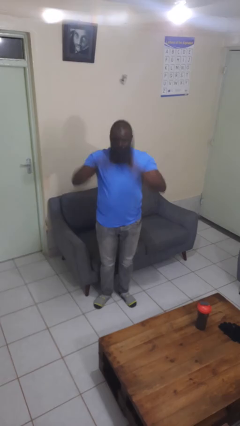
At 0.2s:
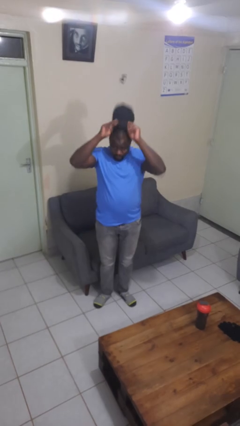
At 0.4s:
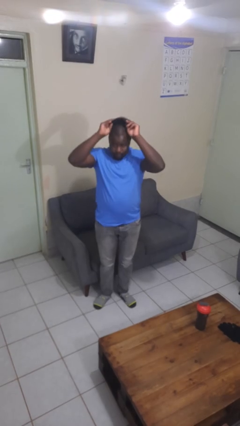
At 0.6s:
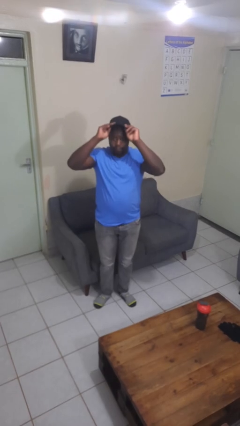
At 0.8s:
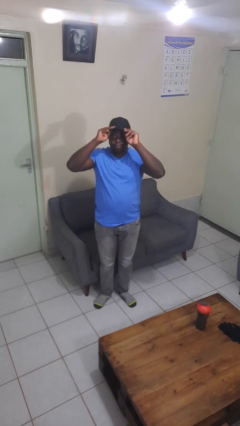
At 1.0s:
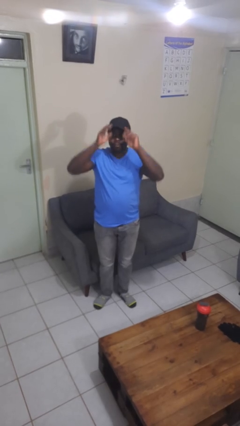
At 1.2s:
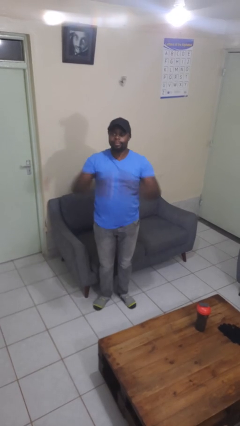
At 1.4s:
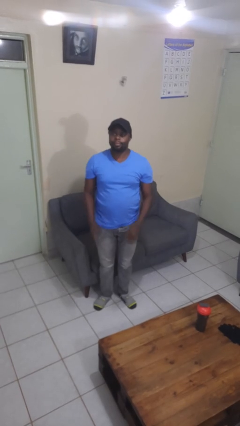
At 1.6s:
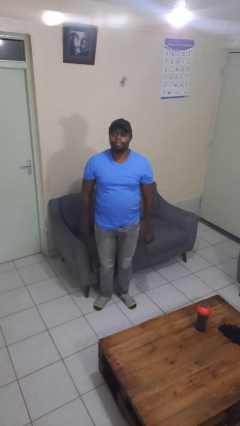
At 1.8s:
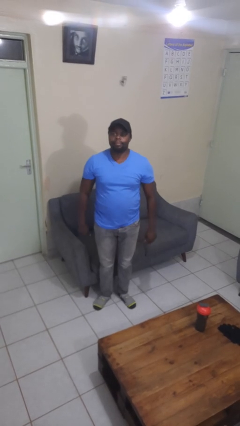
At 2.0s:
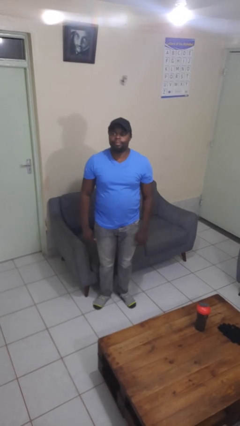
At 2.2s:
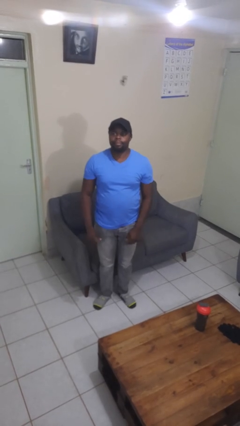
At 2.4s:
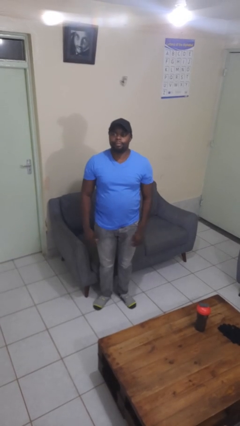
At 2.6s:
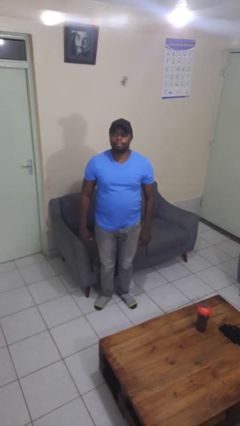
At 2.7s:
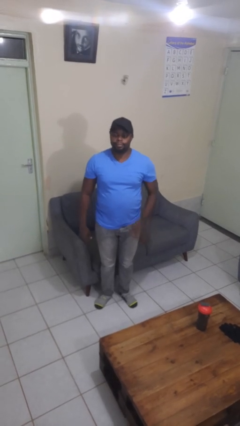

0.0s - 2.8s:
person puts on hat

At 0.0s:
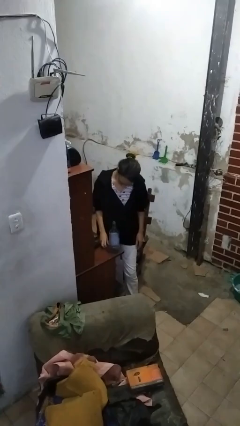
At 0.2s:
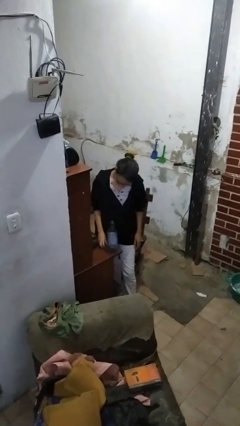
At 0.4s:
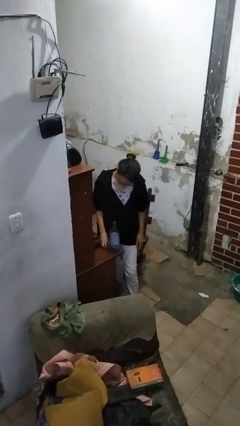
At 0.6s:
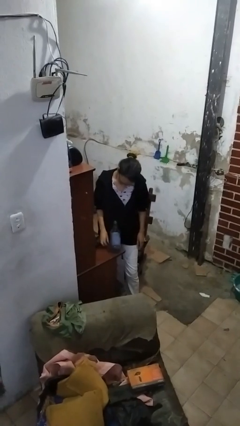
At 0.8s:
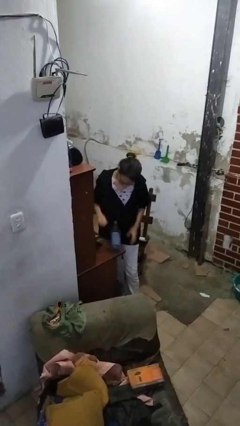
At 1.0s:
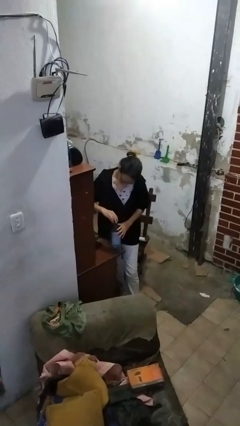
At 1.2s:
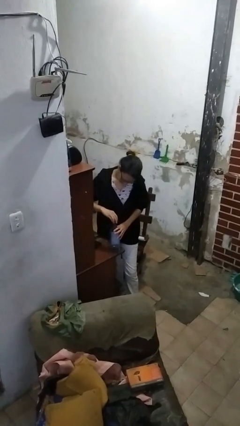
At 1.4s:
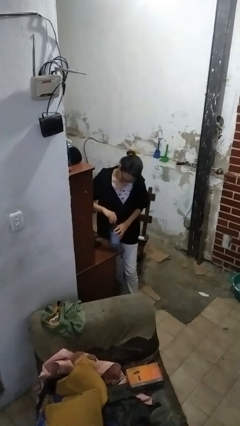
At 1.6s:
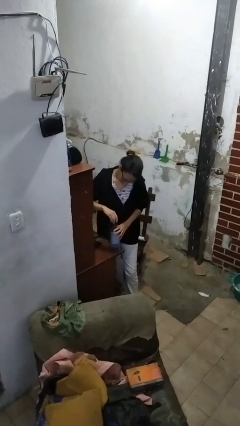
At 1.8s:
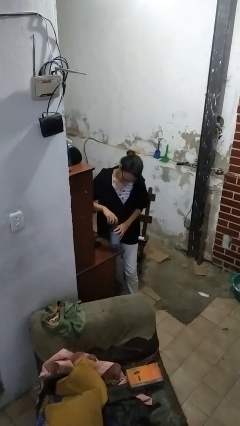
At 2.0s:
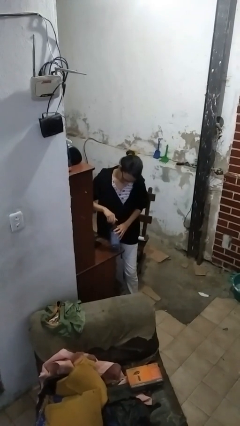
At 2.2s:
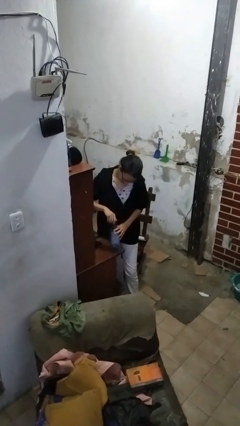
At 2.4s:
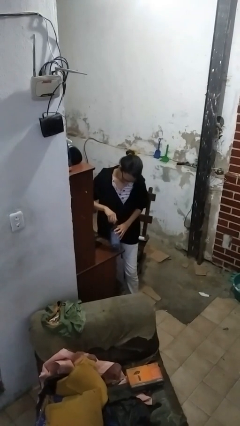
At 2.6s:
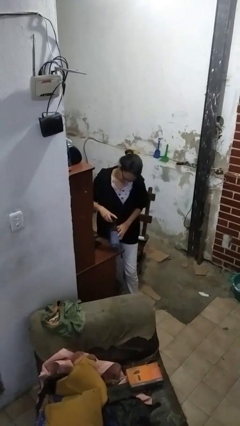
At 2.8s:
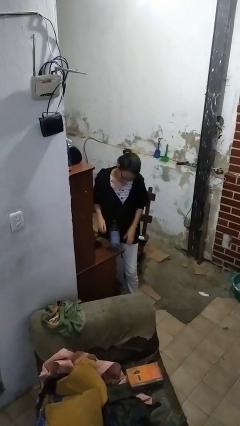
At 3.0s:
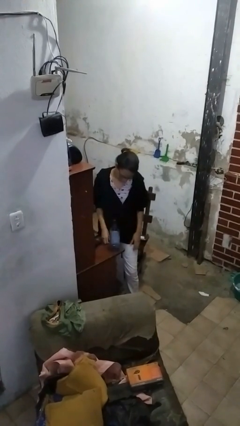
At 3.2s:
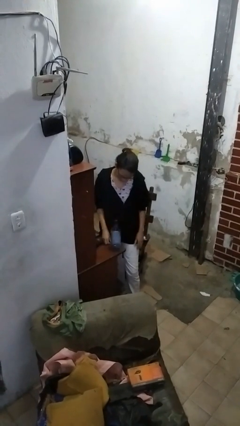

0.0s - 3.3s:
person screws lid to bottle

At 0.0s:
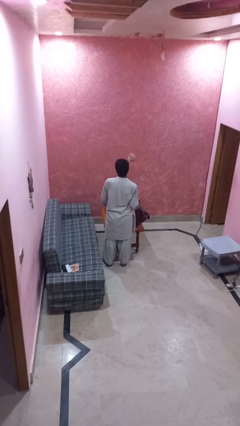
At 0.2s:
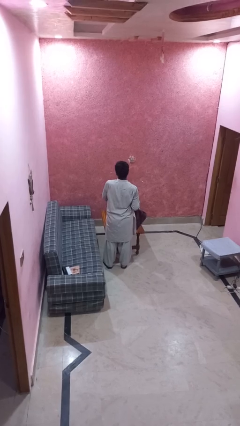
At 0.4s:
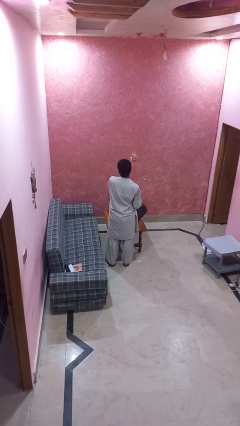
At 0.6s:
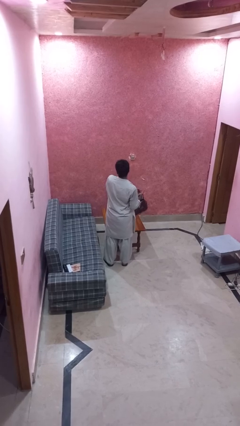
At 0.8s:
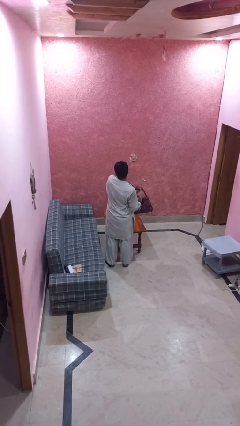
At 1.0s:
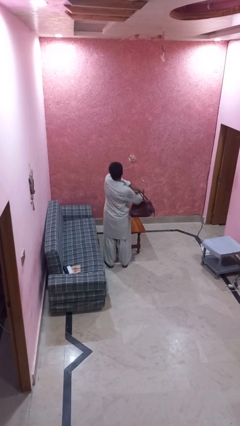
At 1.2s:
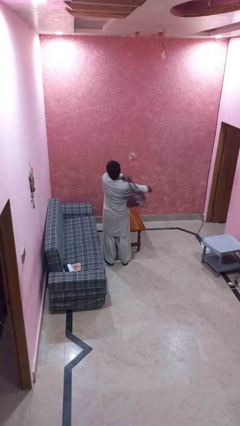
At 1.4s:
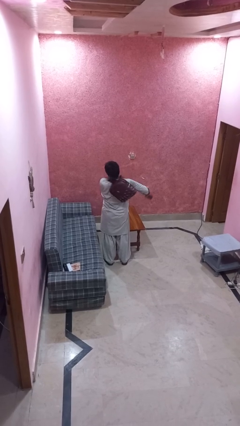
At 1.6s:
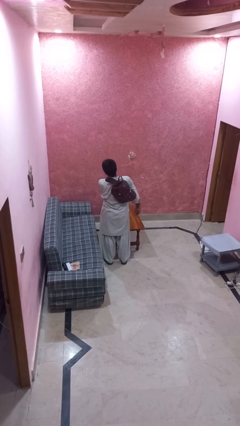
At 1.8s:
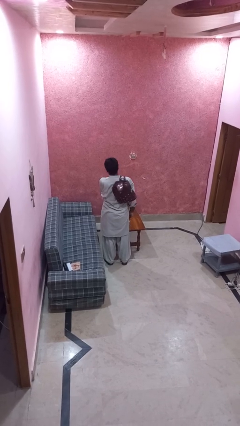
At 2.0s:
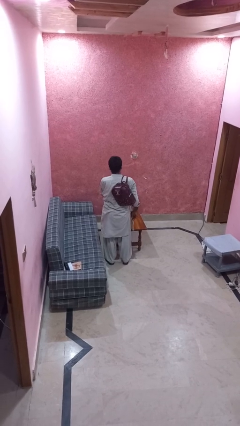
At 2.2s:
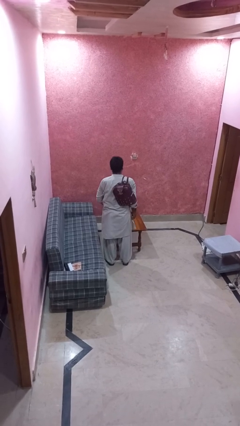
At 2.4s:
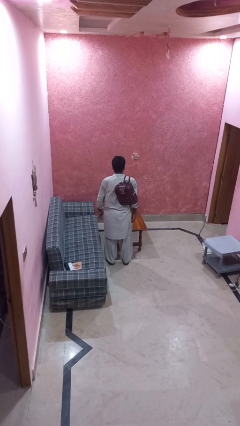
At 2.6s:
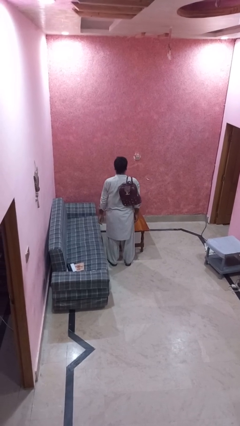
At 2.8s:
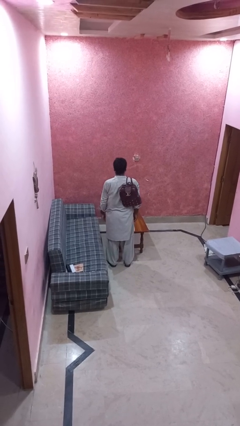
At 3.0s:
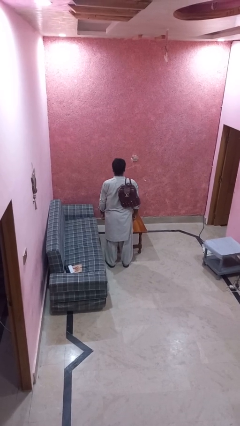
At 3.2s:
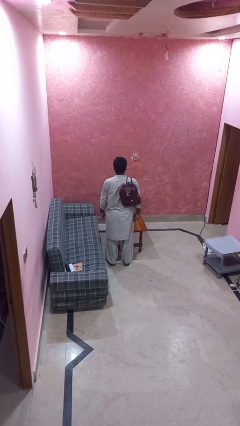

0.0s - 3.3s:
person puts on backpack

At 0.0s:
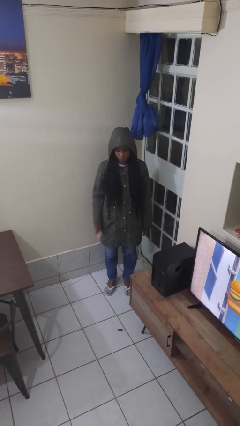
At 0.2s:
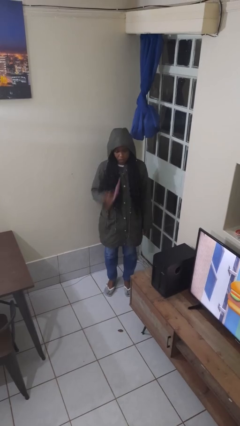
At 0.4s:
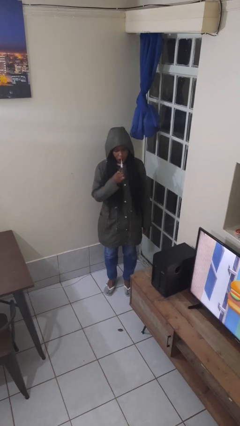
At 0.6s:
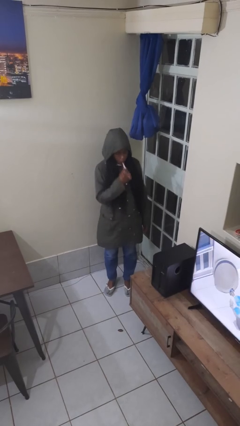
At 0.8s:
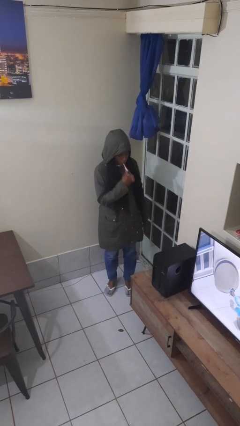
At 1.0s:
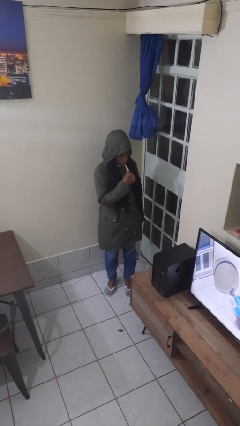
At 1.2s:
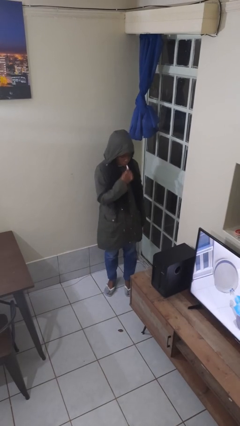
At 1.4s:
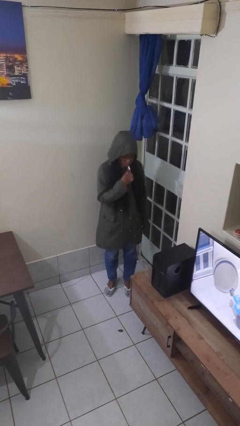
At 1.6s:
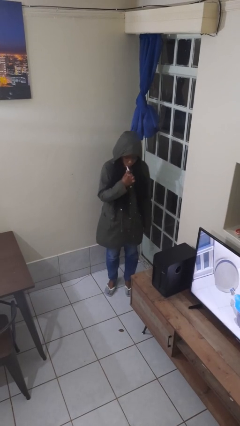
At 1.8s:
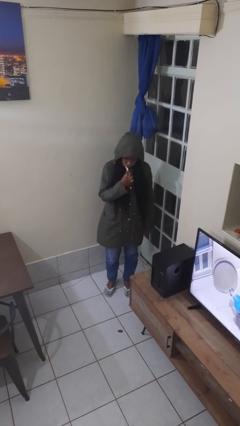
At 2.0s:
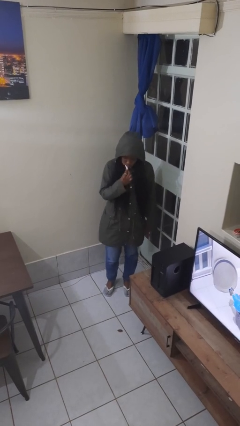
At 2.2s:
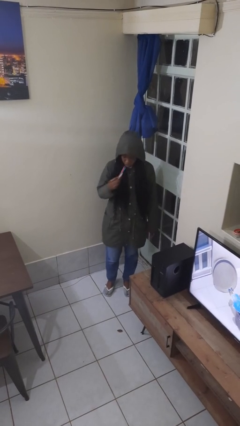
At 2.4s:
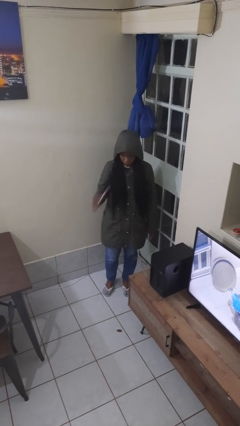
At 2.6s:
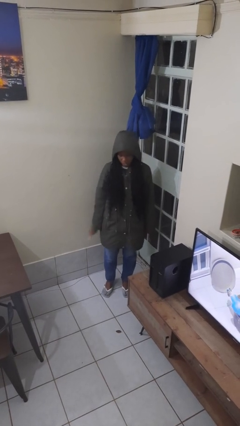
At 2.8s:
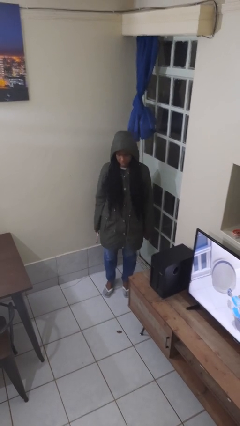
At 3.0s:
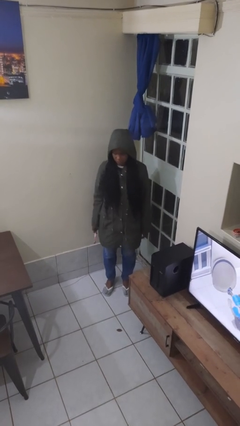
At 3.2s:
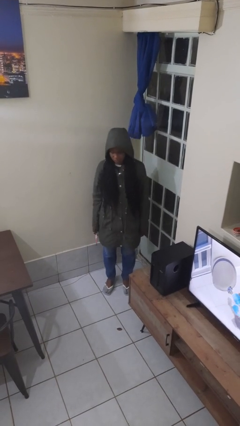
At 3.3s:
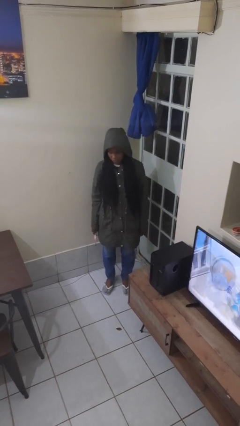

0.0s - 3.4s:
person brushes teeth

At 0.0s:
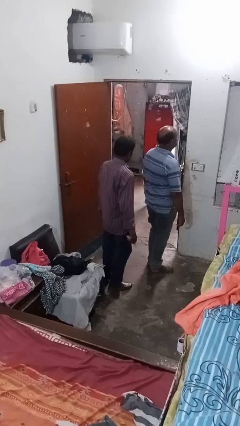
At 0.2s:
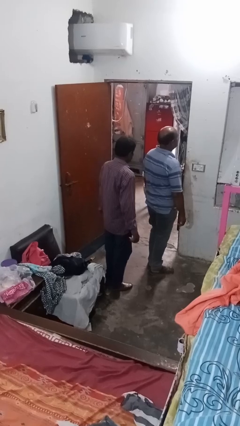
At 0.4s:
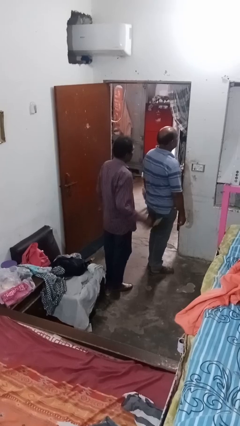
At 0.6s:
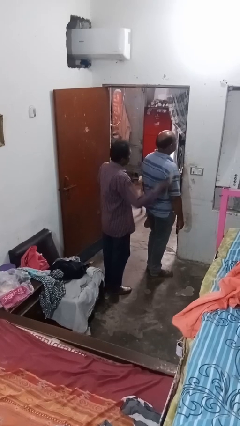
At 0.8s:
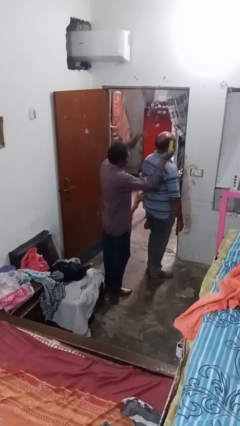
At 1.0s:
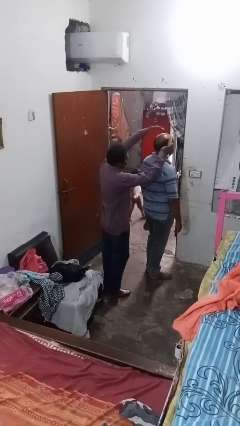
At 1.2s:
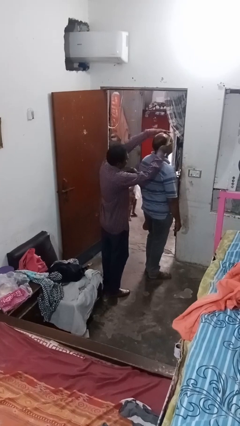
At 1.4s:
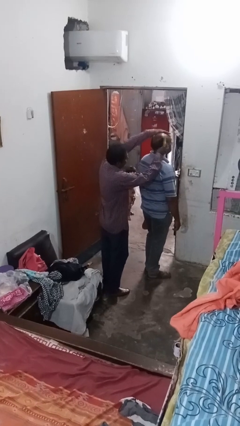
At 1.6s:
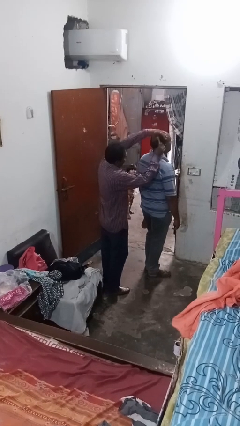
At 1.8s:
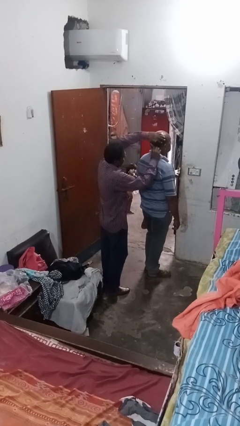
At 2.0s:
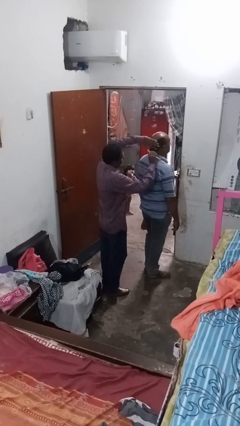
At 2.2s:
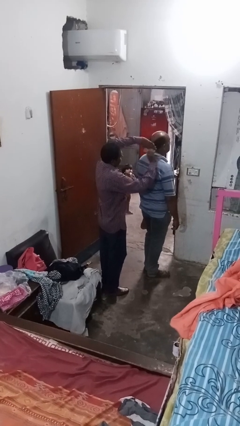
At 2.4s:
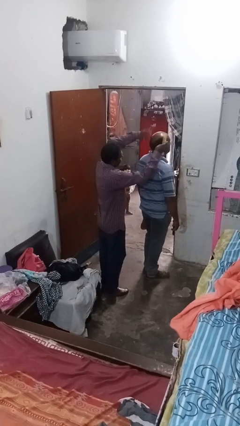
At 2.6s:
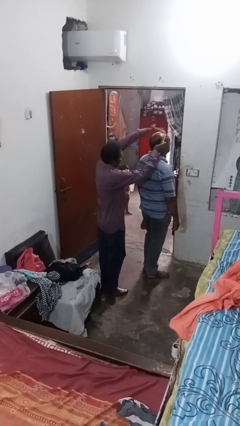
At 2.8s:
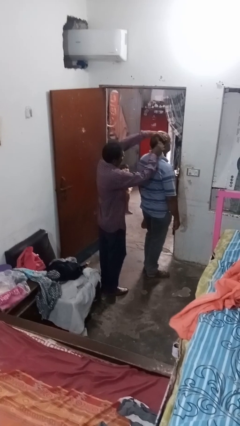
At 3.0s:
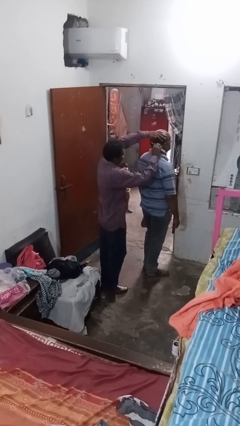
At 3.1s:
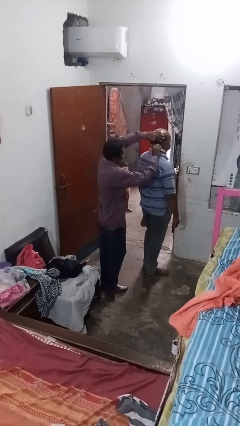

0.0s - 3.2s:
person brushes hair of person

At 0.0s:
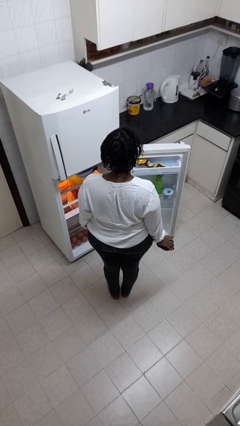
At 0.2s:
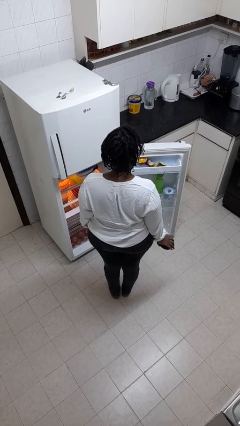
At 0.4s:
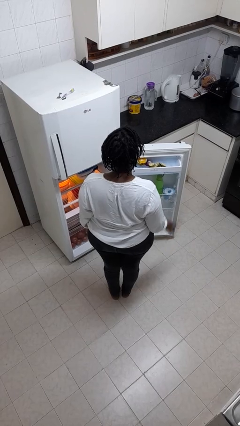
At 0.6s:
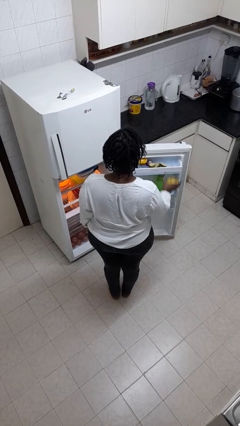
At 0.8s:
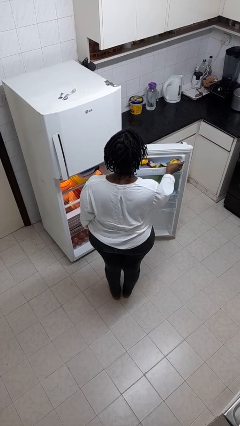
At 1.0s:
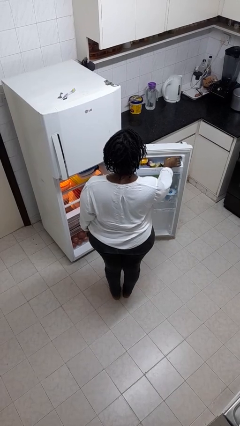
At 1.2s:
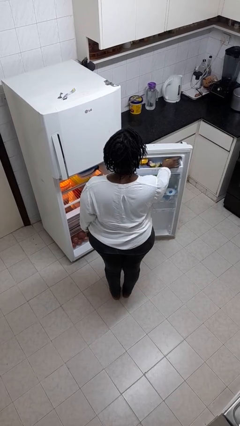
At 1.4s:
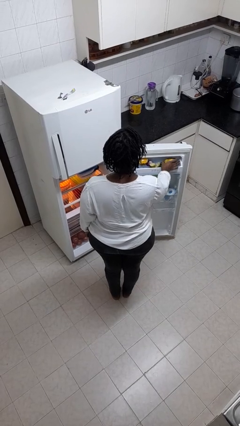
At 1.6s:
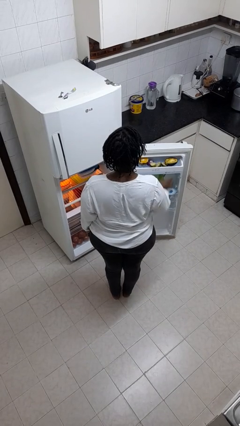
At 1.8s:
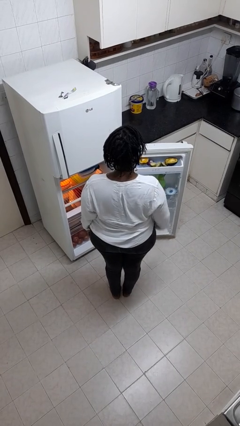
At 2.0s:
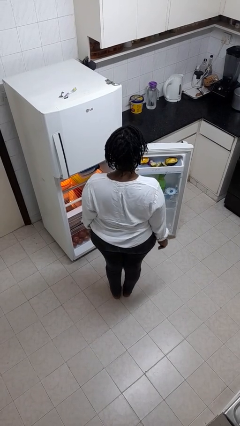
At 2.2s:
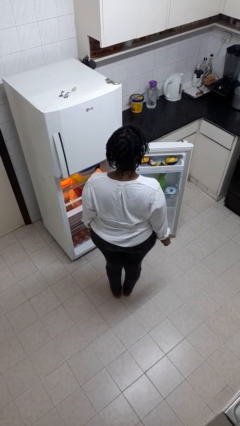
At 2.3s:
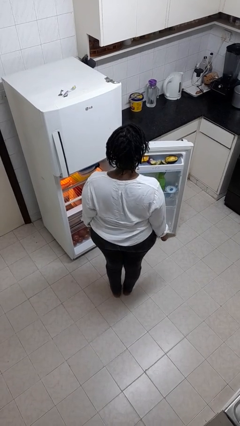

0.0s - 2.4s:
person puts object into refrigerator
